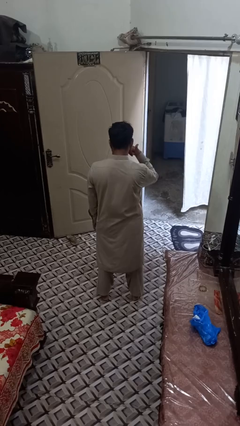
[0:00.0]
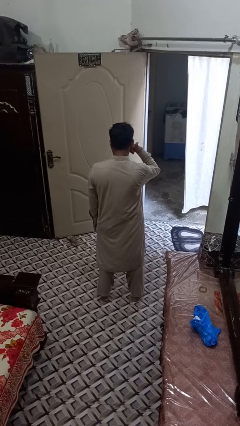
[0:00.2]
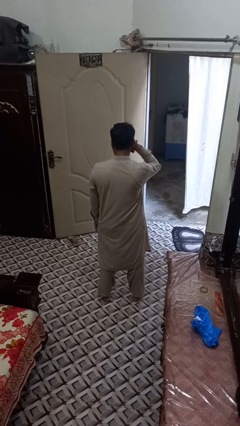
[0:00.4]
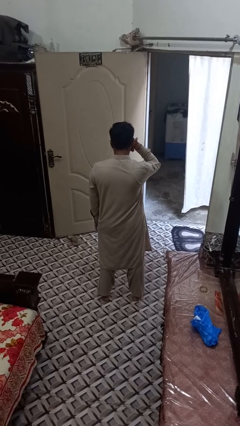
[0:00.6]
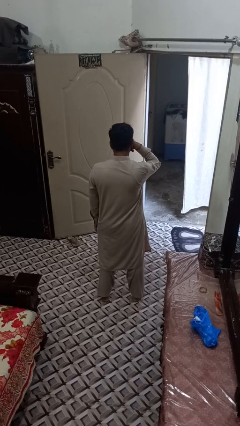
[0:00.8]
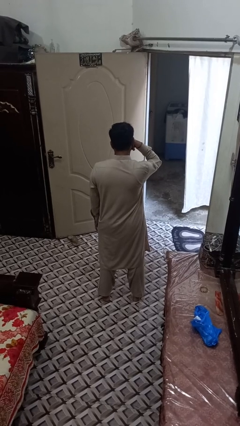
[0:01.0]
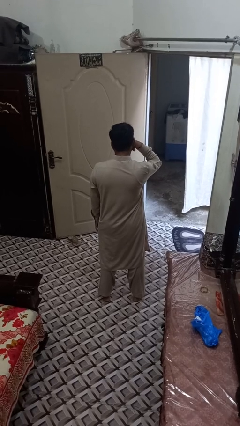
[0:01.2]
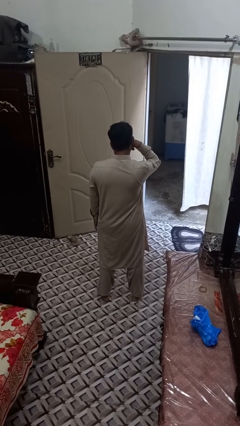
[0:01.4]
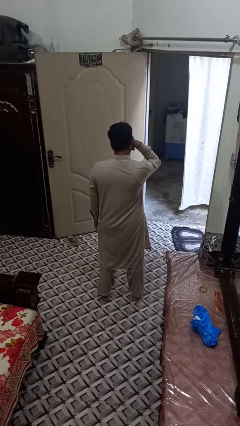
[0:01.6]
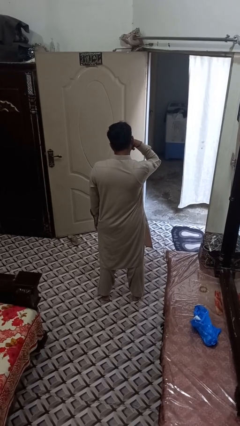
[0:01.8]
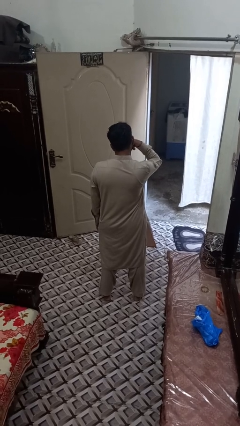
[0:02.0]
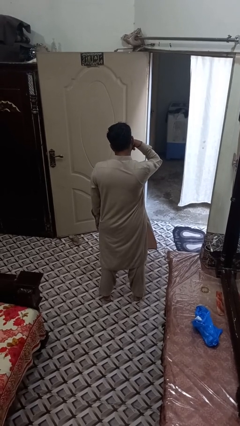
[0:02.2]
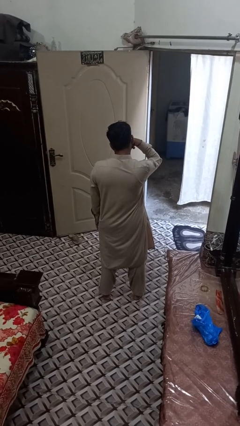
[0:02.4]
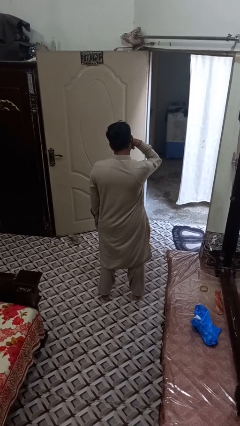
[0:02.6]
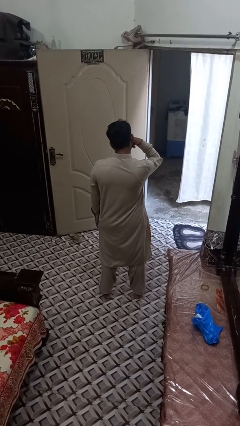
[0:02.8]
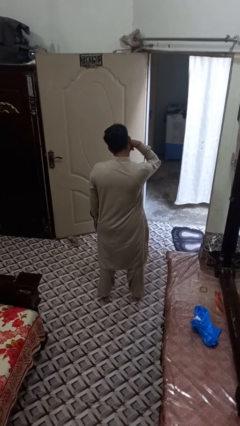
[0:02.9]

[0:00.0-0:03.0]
person gestures call me

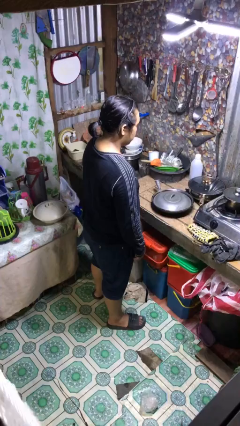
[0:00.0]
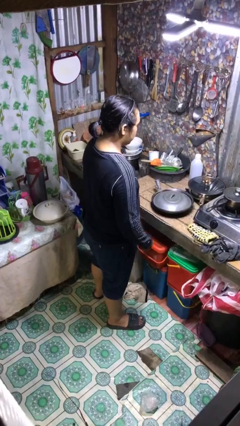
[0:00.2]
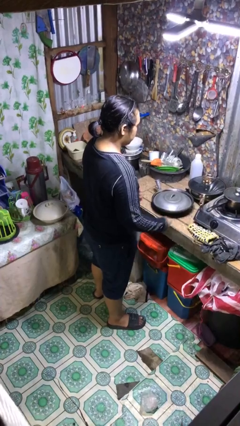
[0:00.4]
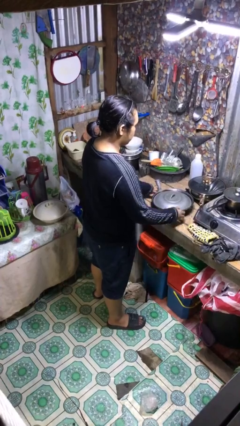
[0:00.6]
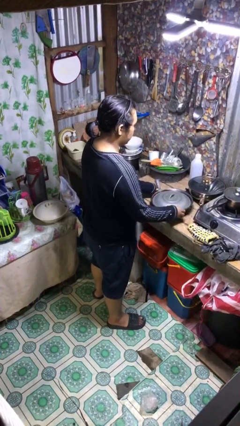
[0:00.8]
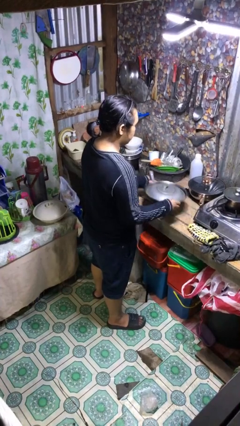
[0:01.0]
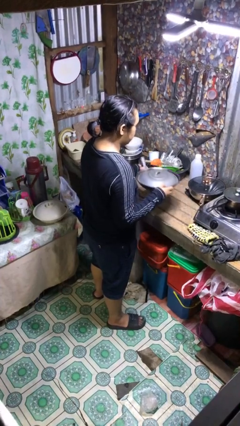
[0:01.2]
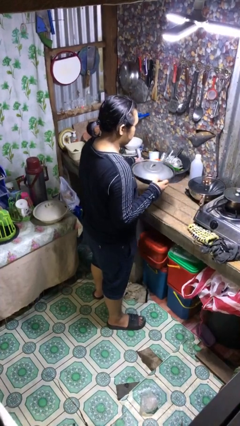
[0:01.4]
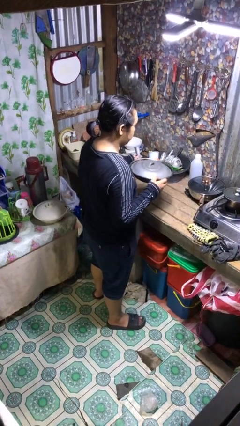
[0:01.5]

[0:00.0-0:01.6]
person picks up object from countertop

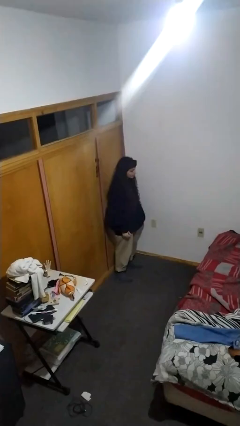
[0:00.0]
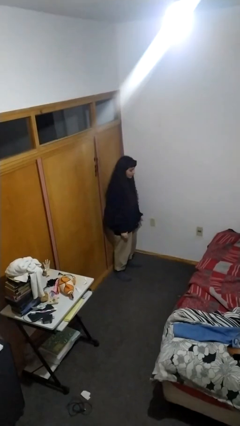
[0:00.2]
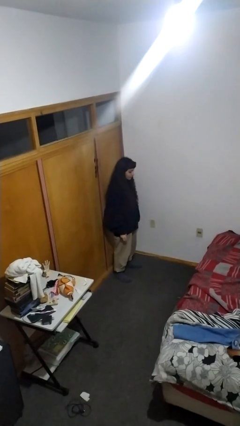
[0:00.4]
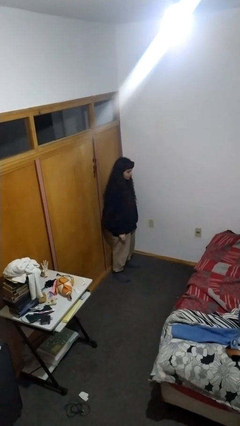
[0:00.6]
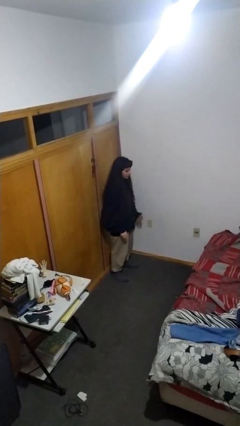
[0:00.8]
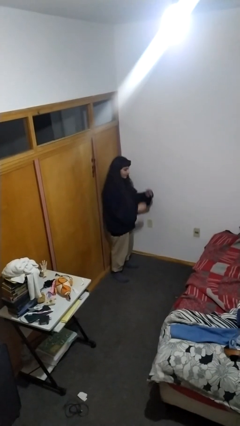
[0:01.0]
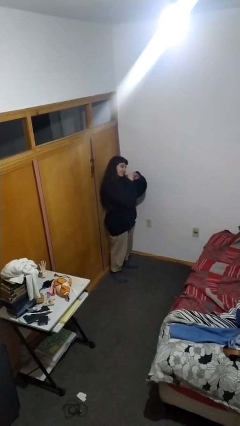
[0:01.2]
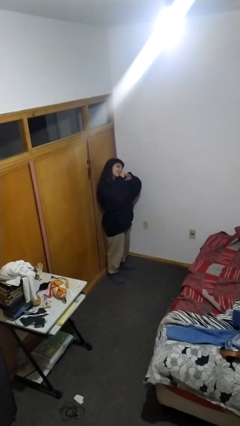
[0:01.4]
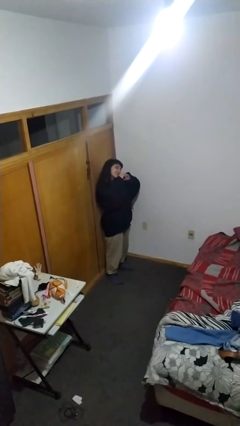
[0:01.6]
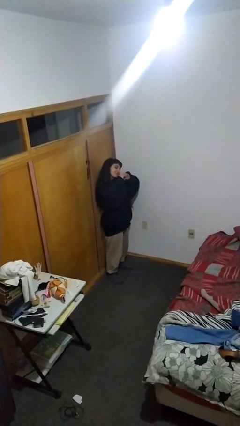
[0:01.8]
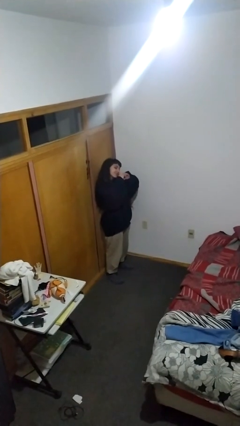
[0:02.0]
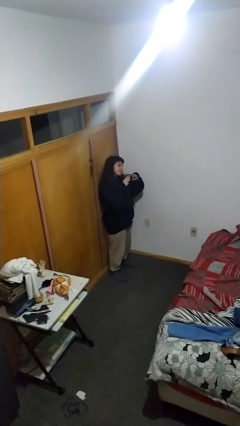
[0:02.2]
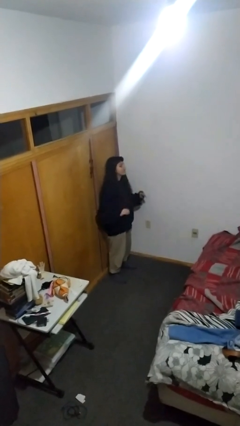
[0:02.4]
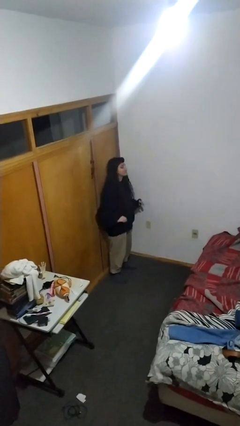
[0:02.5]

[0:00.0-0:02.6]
person gestures heart

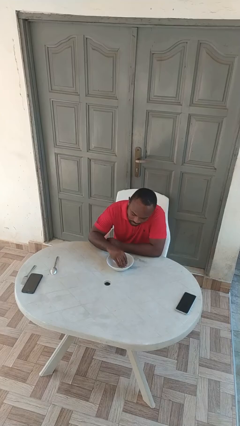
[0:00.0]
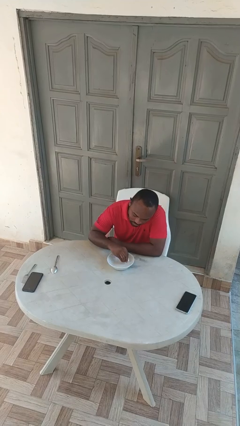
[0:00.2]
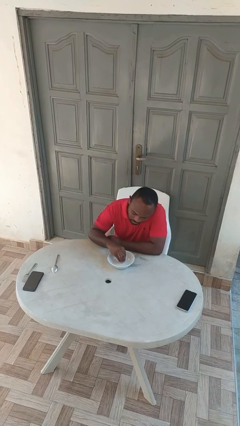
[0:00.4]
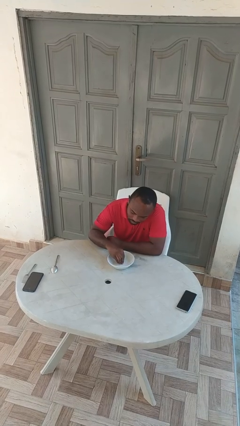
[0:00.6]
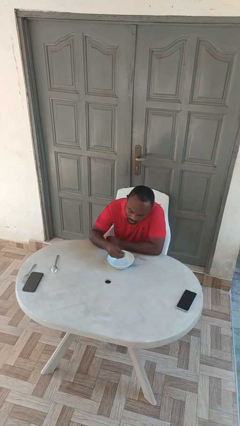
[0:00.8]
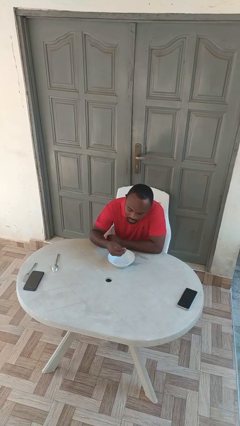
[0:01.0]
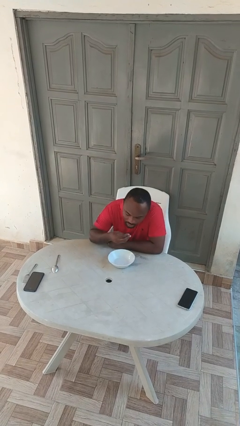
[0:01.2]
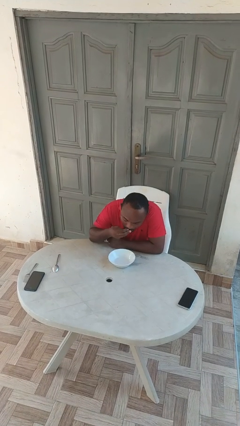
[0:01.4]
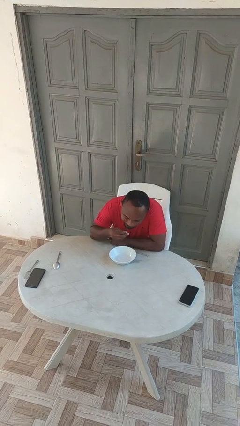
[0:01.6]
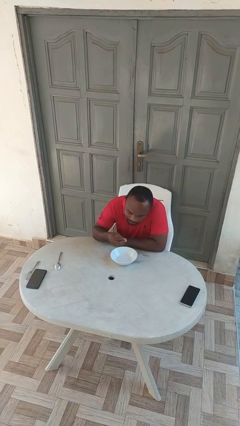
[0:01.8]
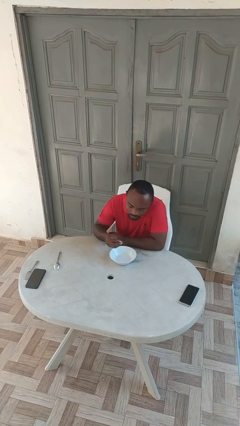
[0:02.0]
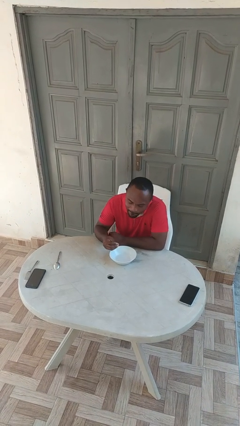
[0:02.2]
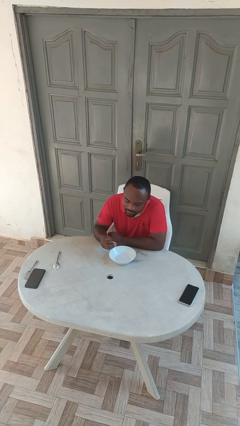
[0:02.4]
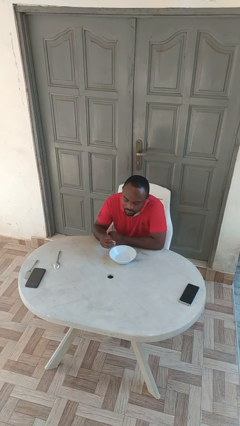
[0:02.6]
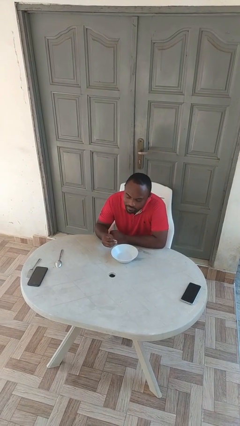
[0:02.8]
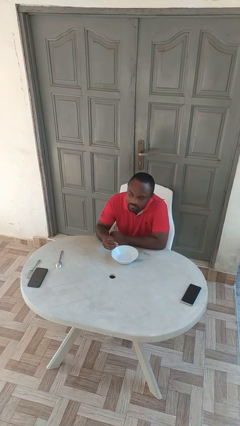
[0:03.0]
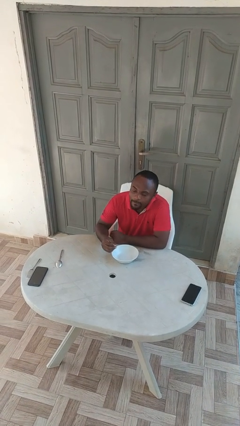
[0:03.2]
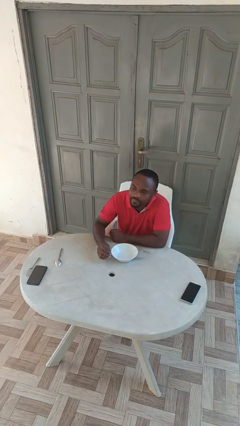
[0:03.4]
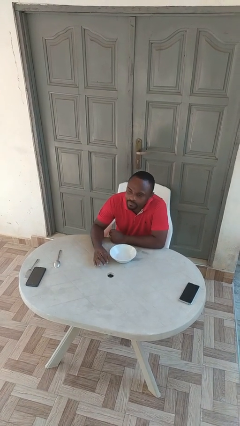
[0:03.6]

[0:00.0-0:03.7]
person eats with hands

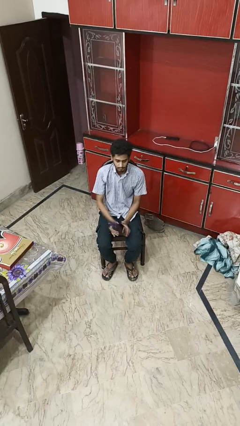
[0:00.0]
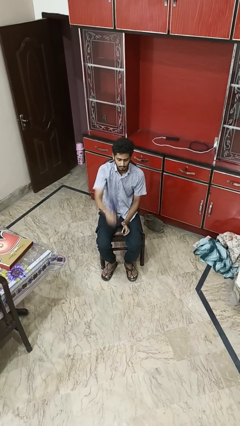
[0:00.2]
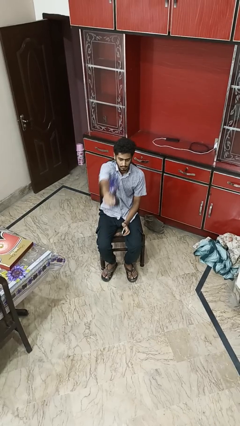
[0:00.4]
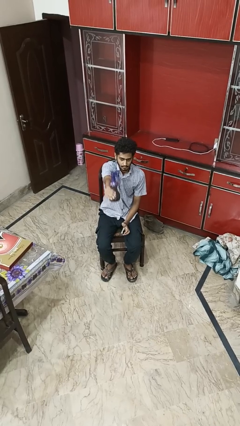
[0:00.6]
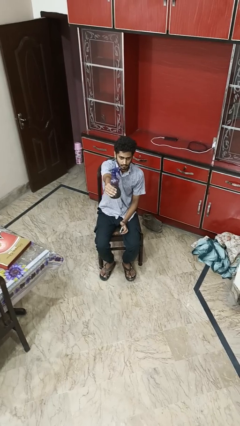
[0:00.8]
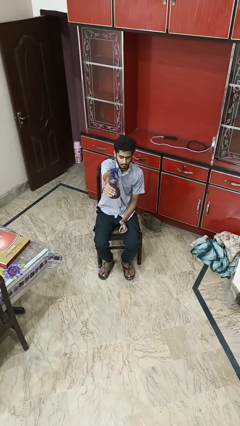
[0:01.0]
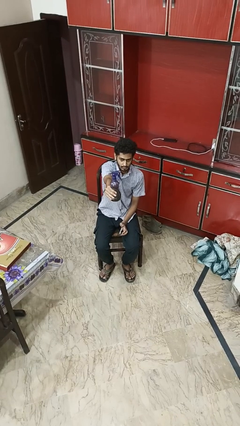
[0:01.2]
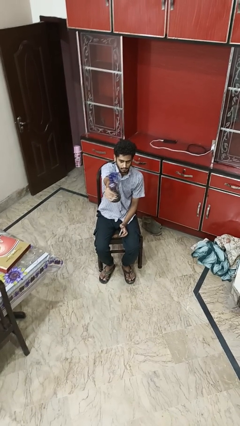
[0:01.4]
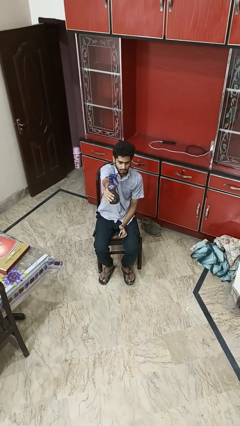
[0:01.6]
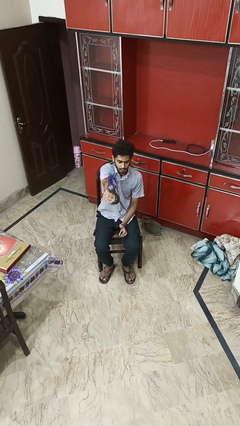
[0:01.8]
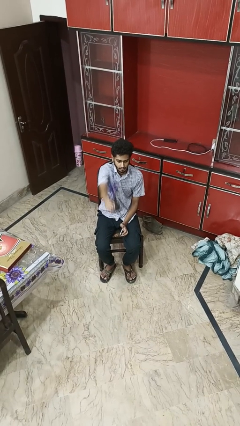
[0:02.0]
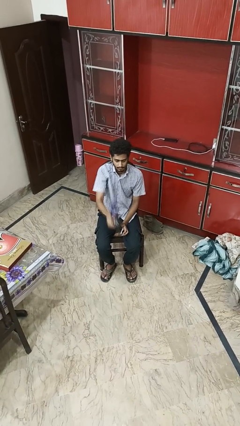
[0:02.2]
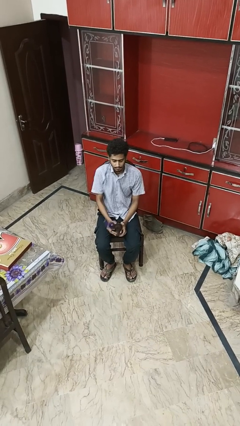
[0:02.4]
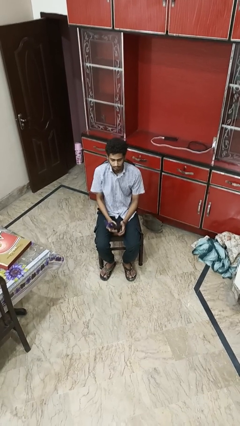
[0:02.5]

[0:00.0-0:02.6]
person squeezes object

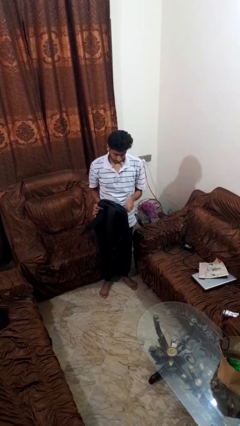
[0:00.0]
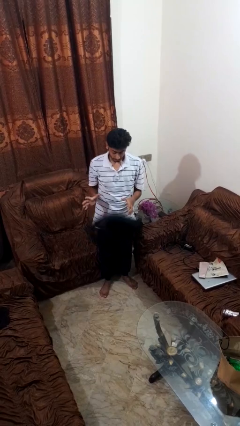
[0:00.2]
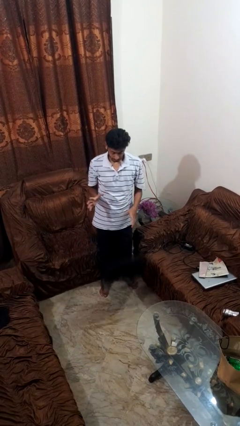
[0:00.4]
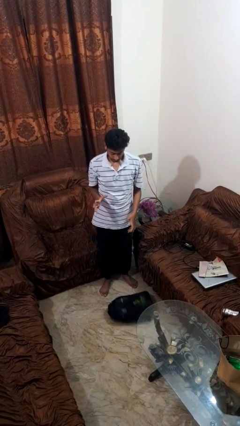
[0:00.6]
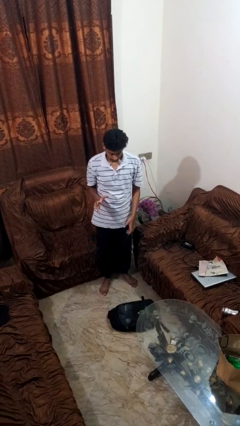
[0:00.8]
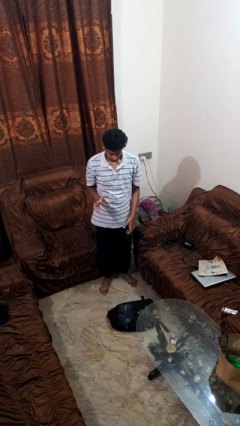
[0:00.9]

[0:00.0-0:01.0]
person drops object

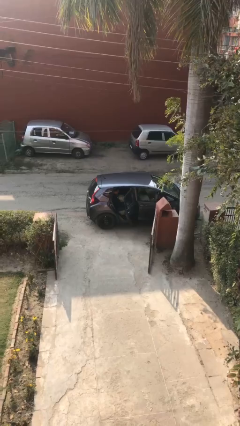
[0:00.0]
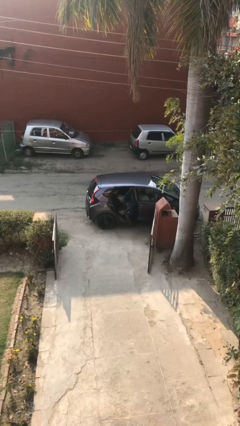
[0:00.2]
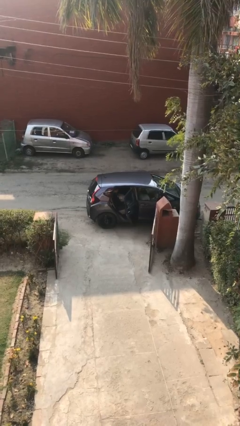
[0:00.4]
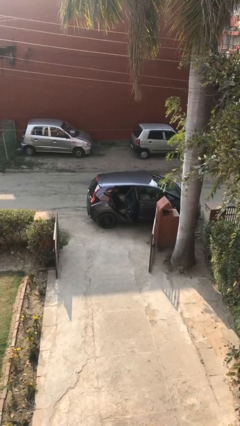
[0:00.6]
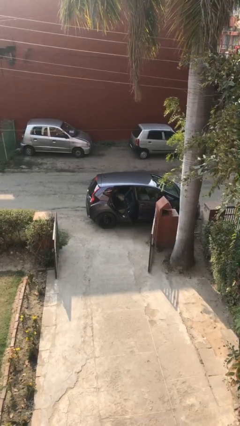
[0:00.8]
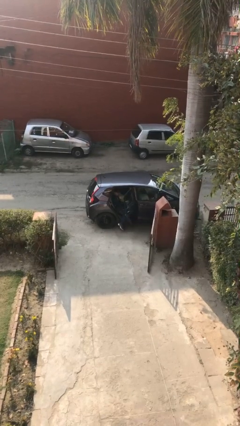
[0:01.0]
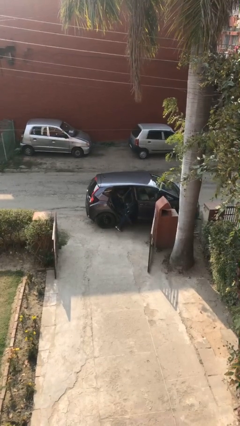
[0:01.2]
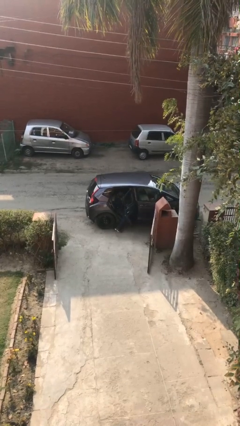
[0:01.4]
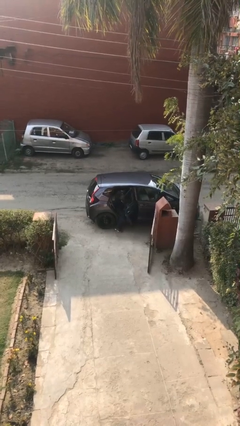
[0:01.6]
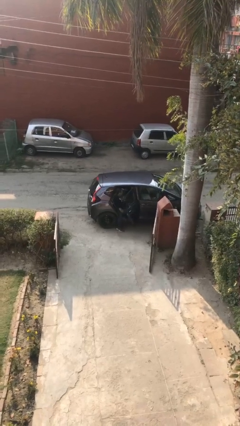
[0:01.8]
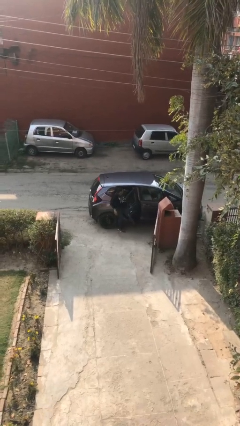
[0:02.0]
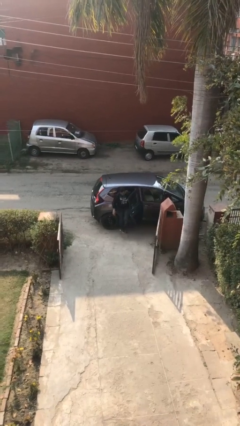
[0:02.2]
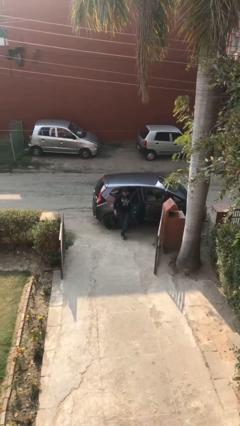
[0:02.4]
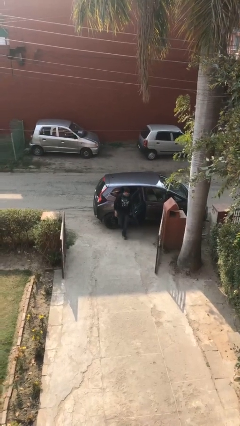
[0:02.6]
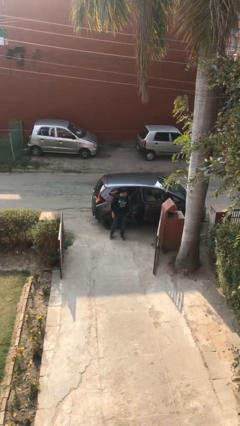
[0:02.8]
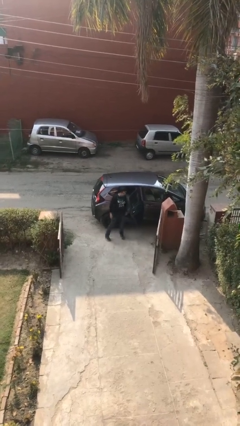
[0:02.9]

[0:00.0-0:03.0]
person exits car
